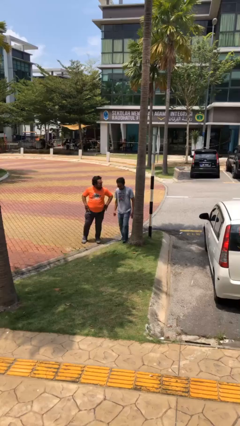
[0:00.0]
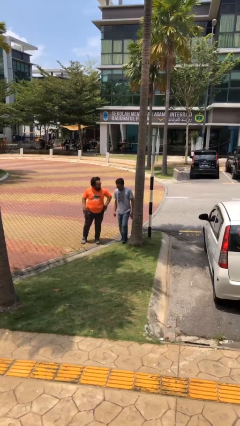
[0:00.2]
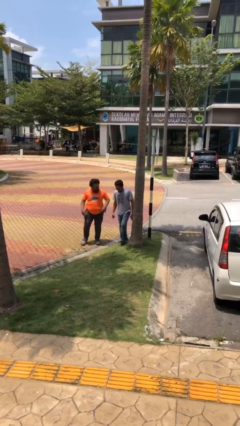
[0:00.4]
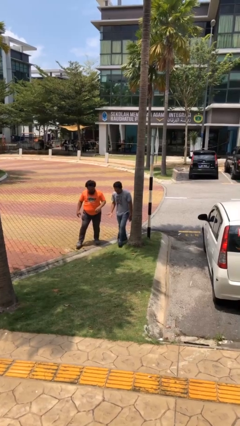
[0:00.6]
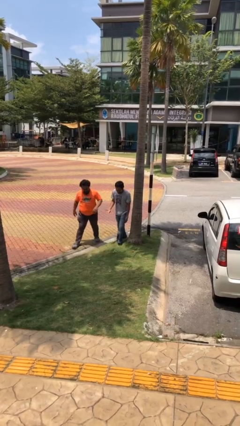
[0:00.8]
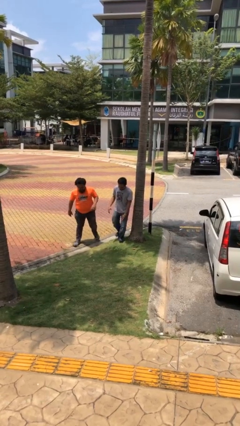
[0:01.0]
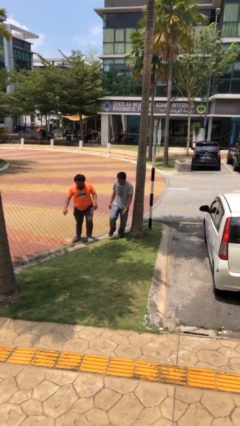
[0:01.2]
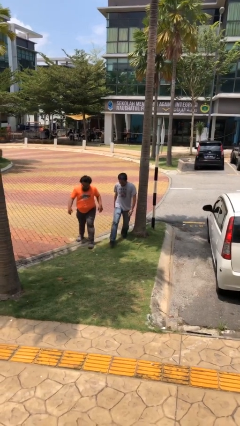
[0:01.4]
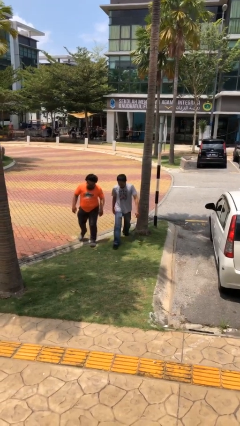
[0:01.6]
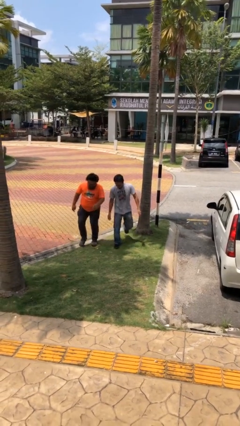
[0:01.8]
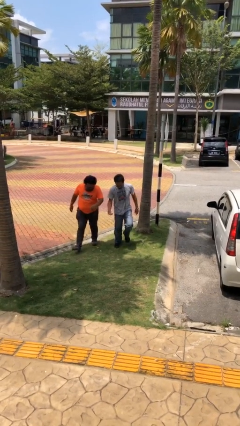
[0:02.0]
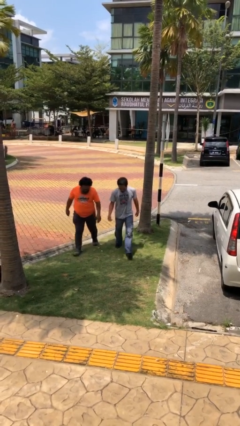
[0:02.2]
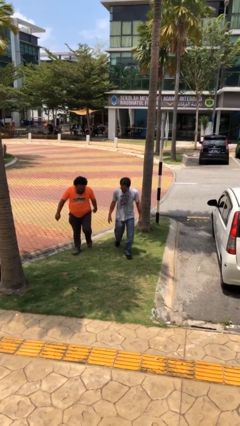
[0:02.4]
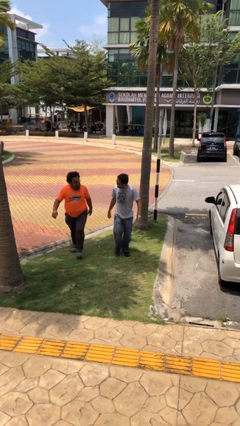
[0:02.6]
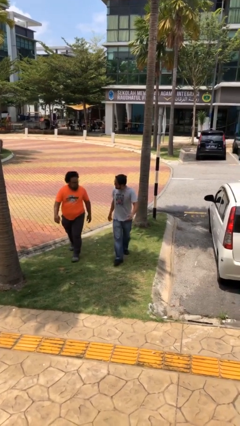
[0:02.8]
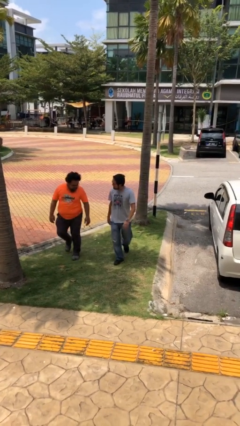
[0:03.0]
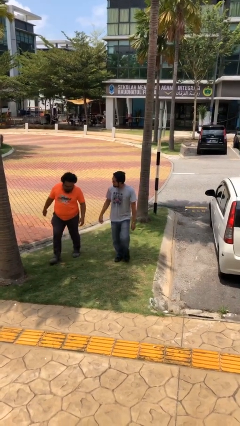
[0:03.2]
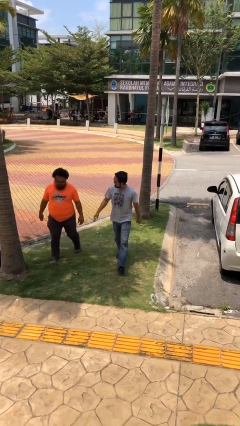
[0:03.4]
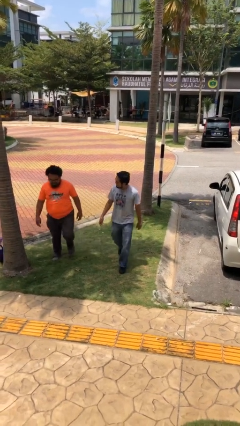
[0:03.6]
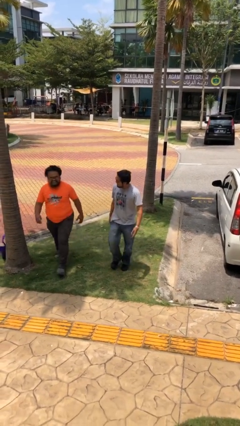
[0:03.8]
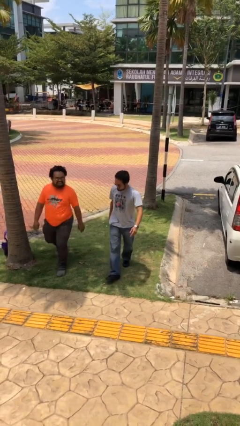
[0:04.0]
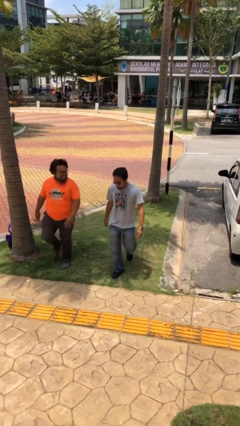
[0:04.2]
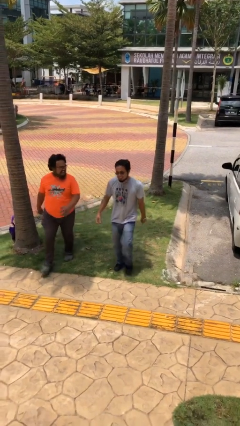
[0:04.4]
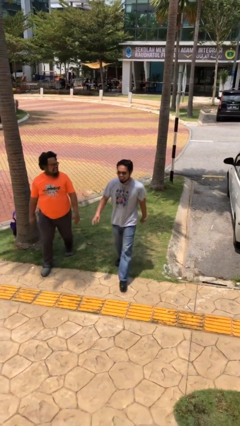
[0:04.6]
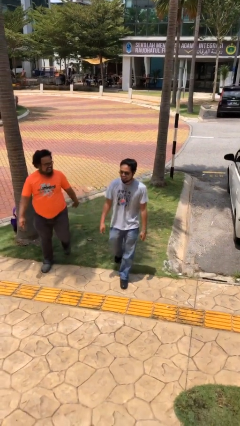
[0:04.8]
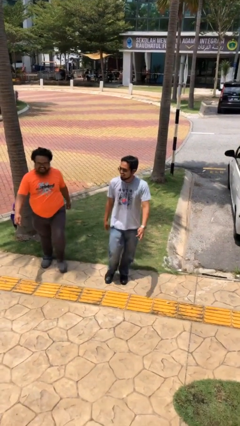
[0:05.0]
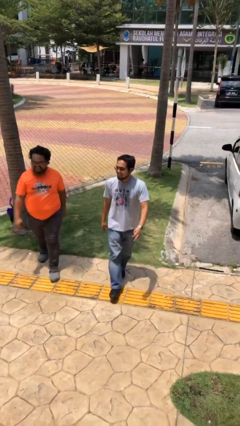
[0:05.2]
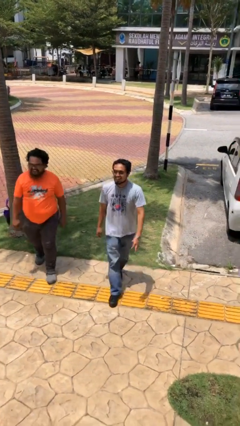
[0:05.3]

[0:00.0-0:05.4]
person talks to person

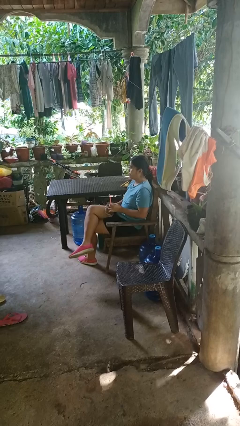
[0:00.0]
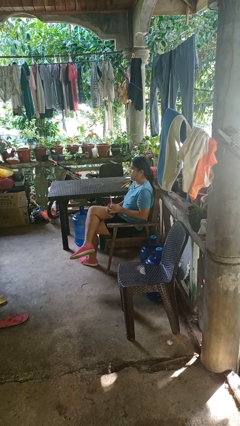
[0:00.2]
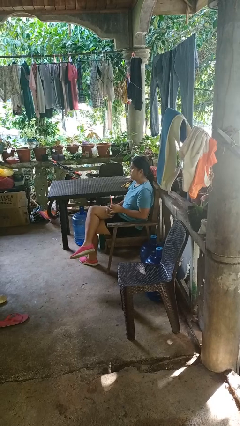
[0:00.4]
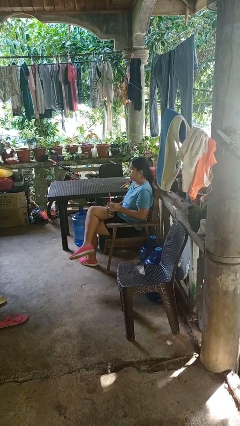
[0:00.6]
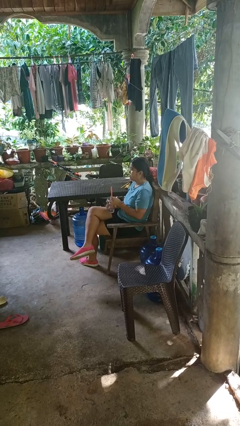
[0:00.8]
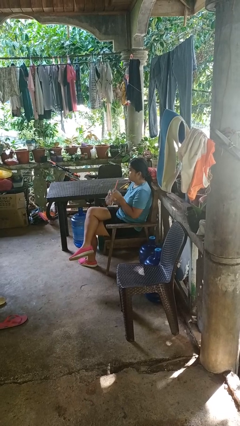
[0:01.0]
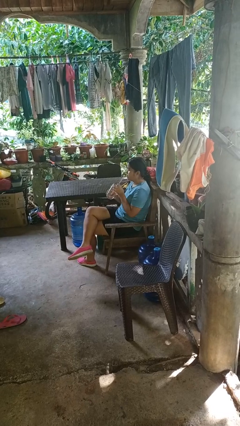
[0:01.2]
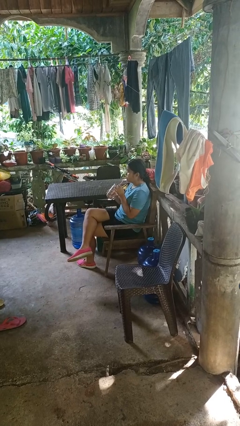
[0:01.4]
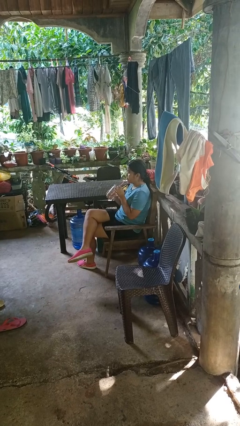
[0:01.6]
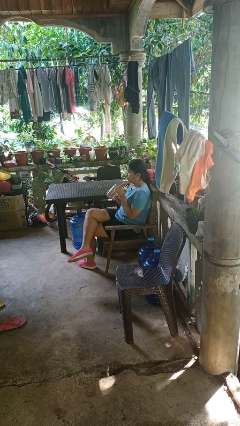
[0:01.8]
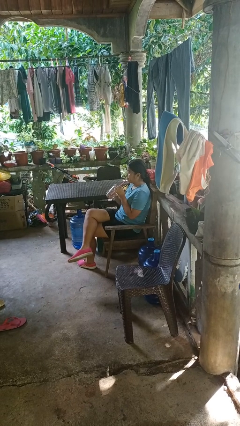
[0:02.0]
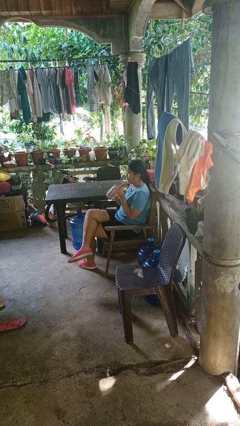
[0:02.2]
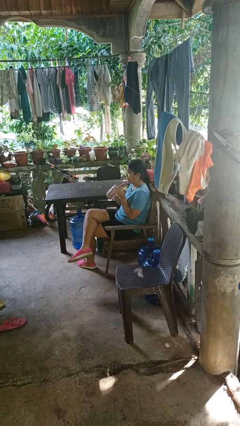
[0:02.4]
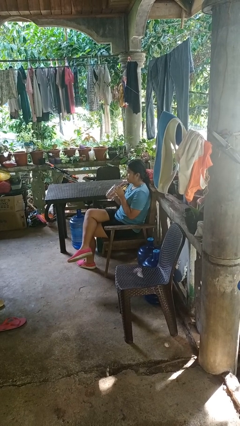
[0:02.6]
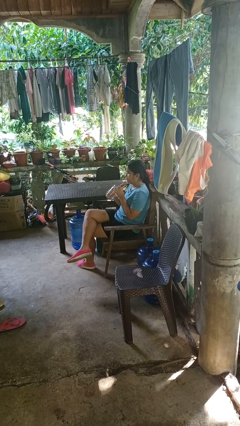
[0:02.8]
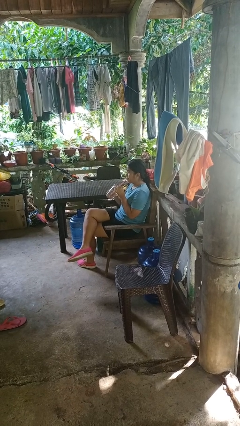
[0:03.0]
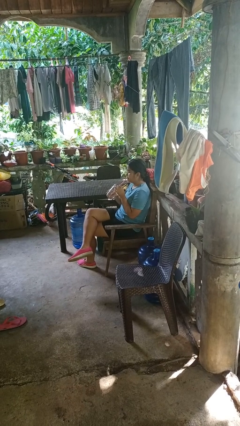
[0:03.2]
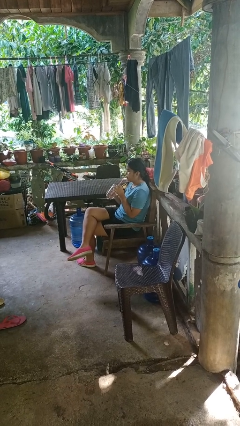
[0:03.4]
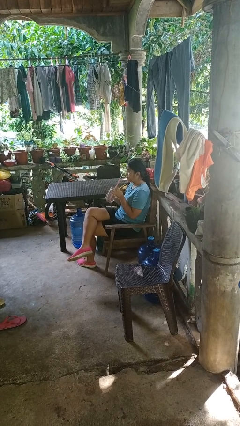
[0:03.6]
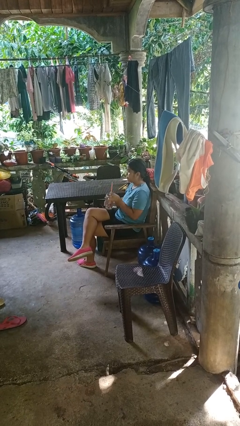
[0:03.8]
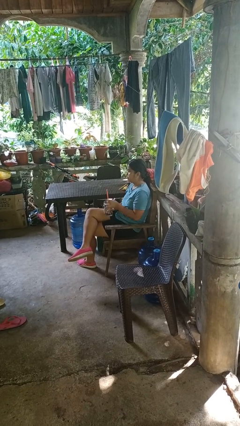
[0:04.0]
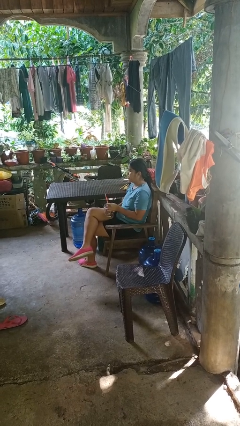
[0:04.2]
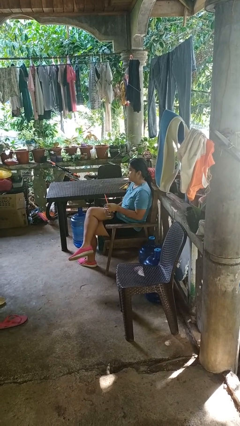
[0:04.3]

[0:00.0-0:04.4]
person drinks from straw

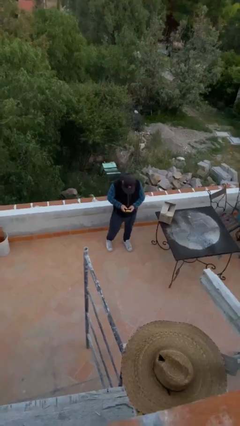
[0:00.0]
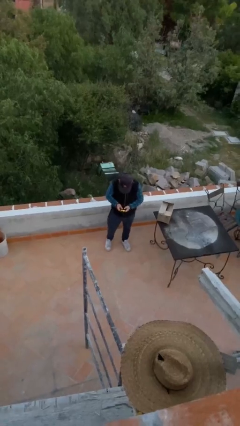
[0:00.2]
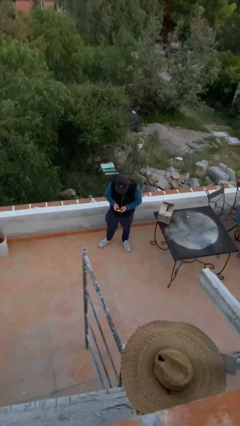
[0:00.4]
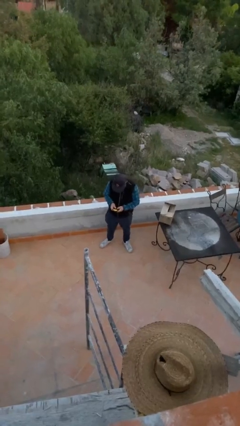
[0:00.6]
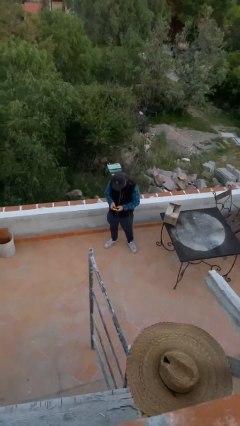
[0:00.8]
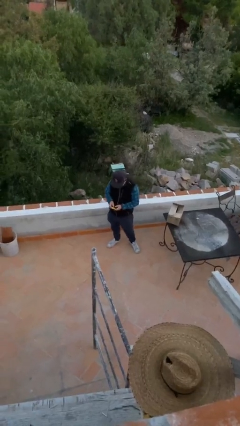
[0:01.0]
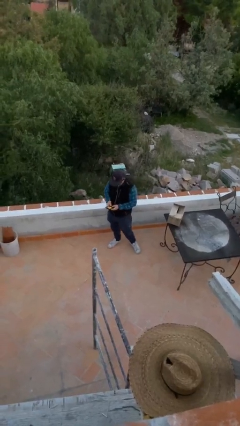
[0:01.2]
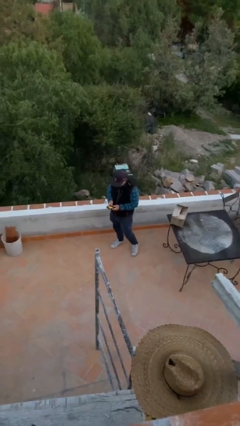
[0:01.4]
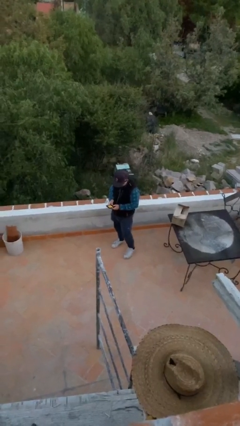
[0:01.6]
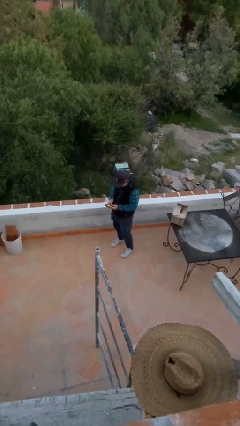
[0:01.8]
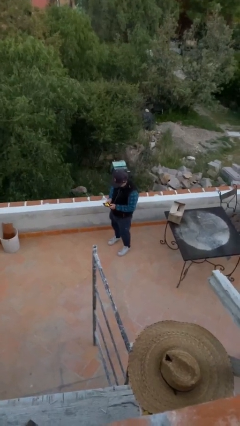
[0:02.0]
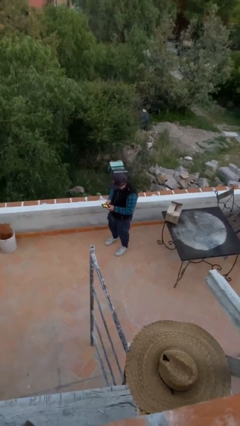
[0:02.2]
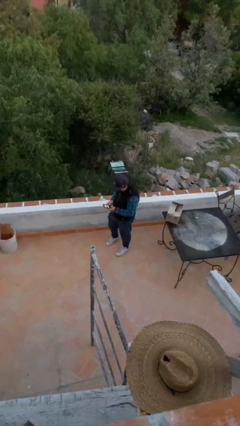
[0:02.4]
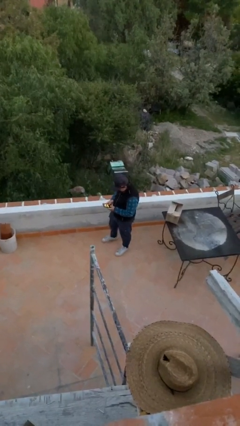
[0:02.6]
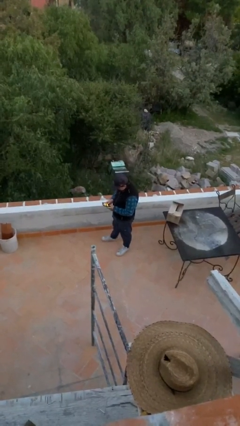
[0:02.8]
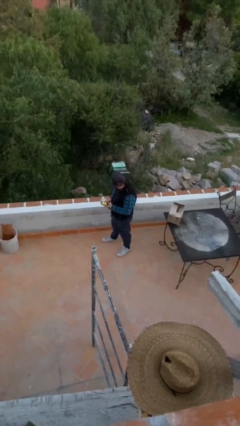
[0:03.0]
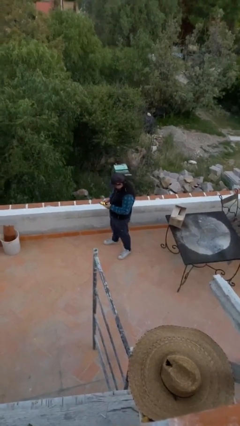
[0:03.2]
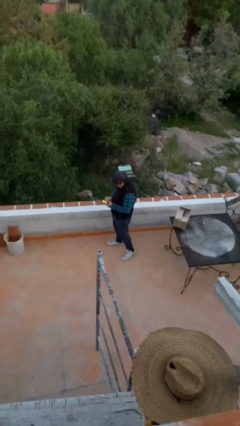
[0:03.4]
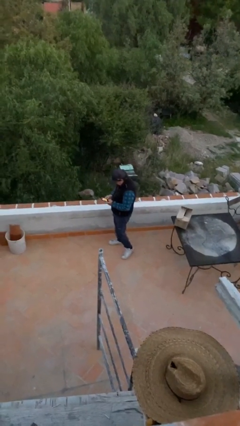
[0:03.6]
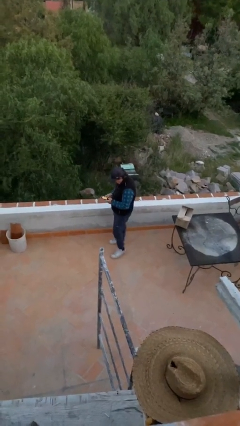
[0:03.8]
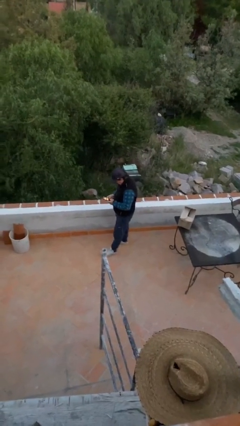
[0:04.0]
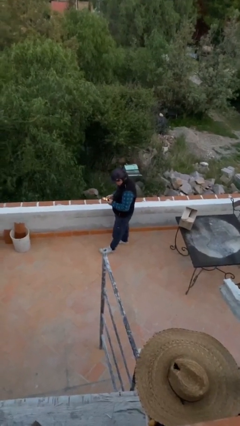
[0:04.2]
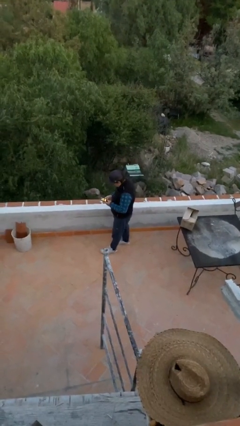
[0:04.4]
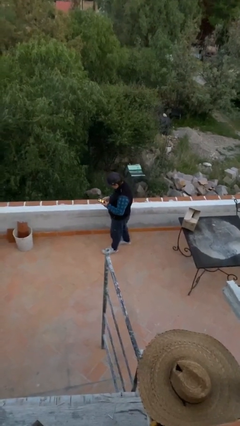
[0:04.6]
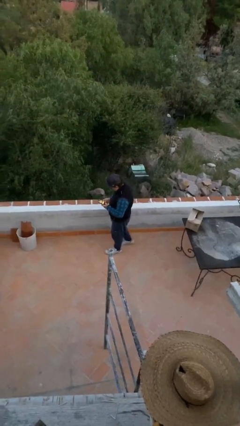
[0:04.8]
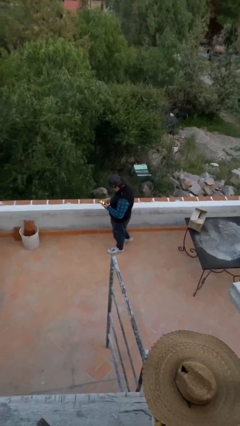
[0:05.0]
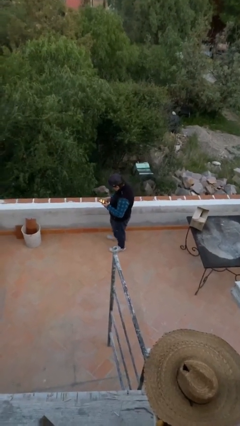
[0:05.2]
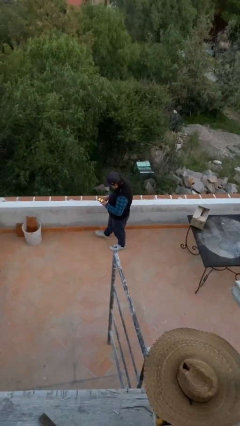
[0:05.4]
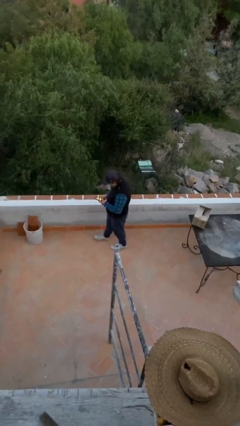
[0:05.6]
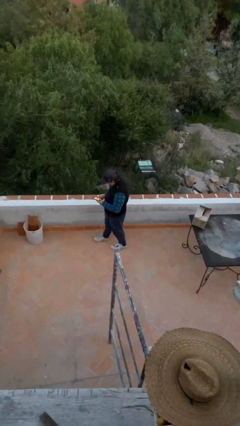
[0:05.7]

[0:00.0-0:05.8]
person texts on phone

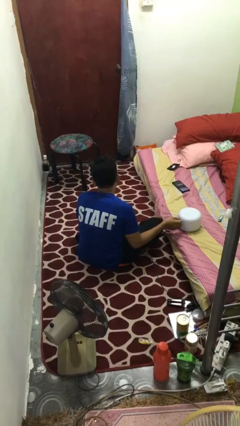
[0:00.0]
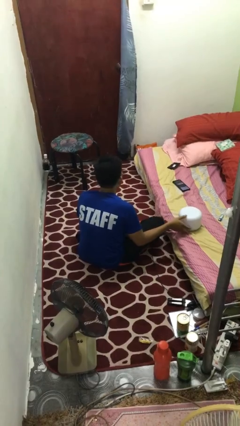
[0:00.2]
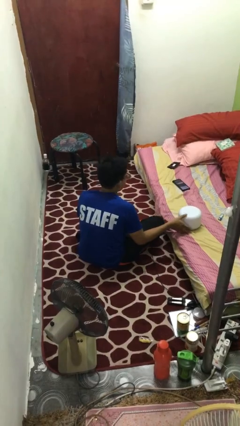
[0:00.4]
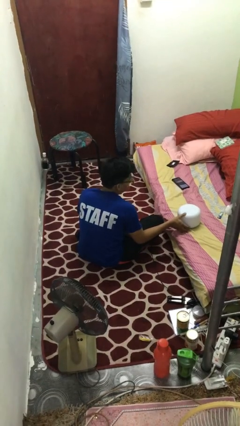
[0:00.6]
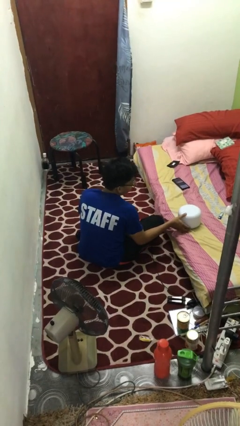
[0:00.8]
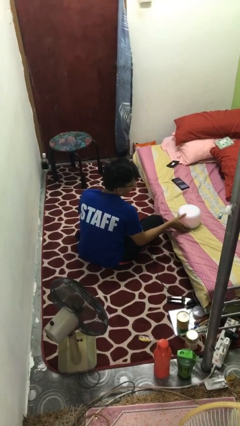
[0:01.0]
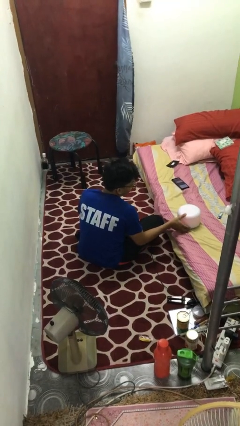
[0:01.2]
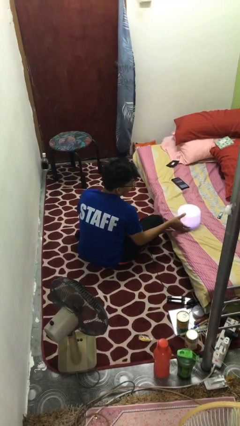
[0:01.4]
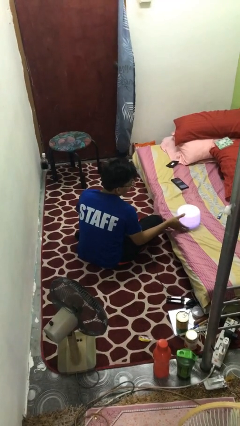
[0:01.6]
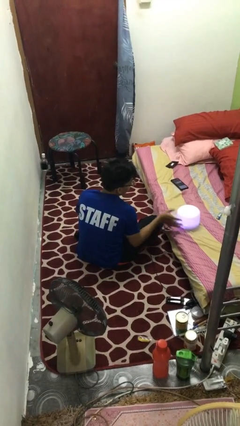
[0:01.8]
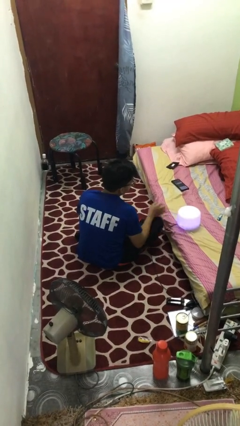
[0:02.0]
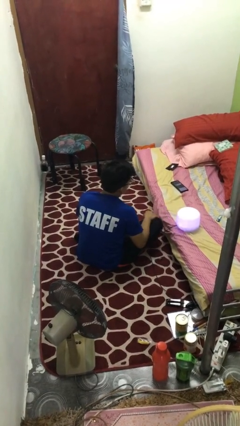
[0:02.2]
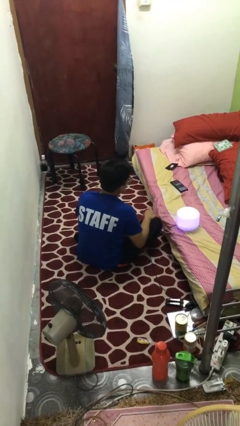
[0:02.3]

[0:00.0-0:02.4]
person turns on lamp
